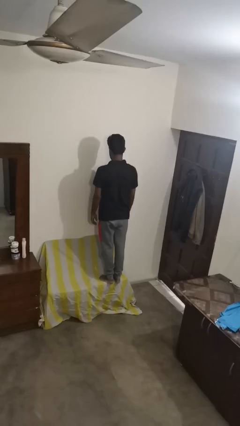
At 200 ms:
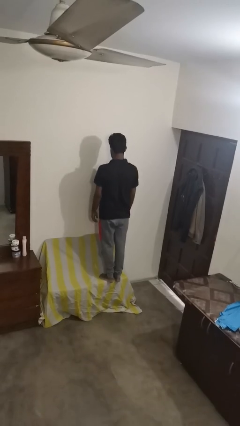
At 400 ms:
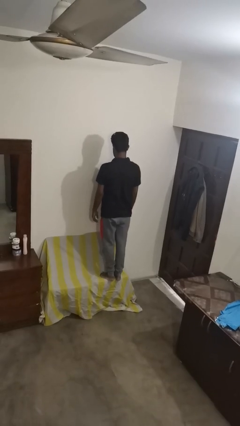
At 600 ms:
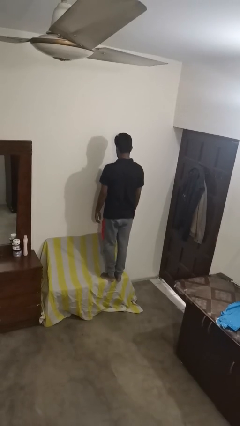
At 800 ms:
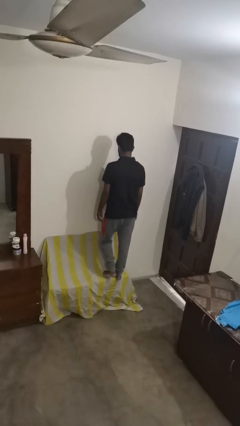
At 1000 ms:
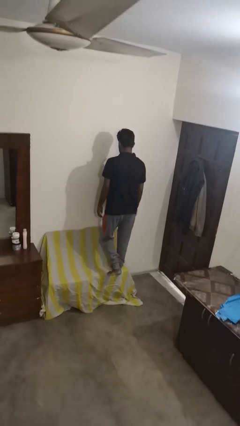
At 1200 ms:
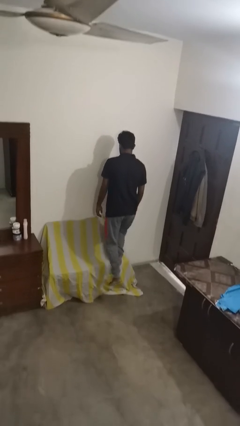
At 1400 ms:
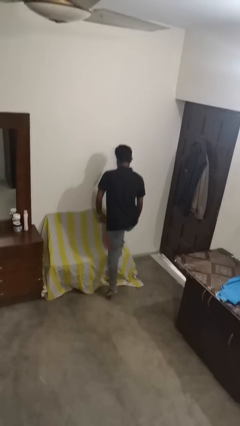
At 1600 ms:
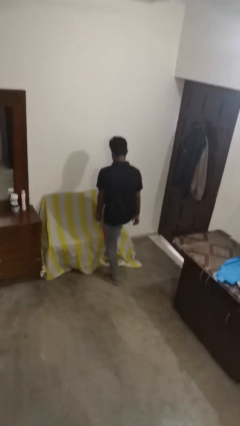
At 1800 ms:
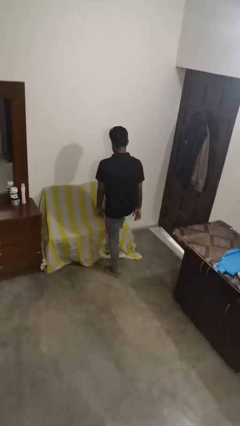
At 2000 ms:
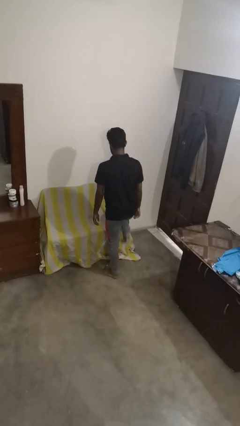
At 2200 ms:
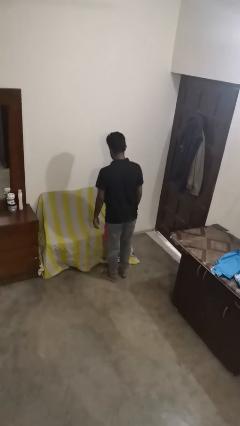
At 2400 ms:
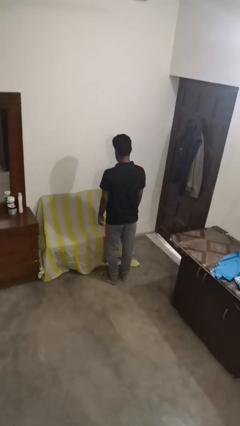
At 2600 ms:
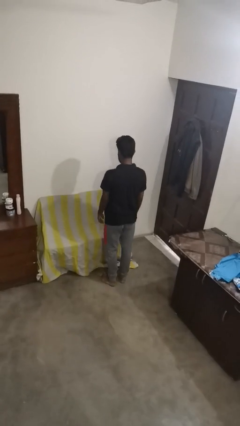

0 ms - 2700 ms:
person climbs off couch

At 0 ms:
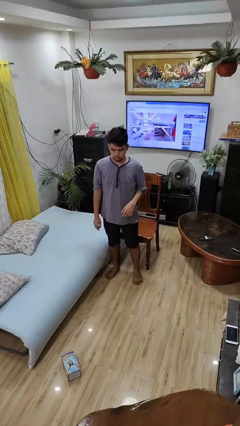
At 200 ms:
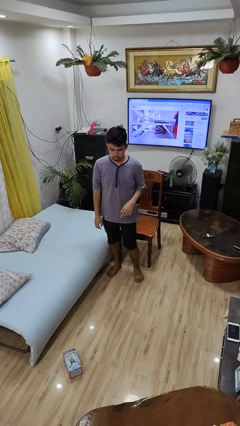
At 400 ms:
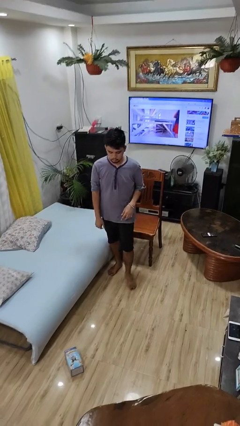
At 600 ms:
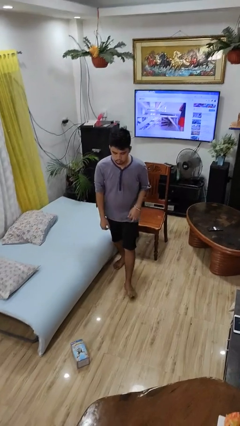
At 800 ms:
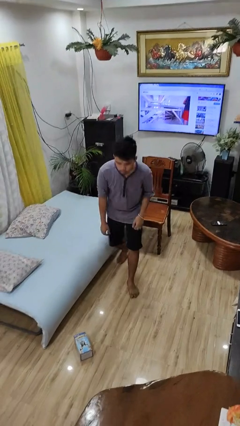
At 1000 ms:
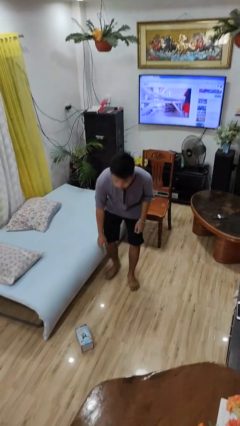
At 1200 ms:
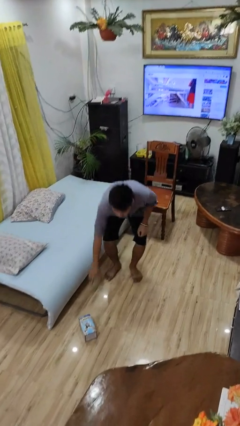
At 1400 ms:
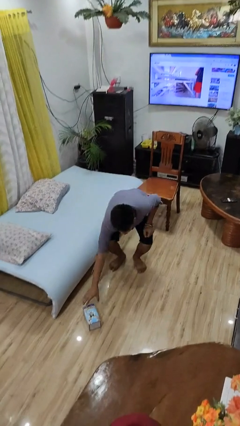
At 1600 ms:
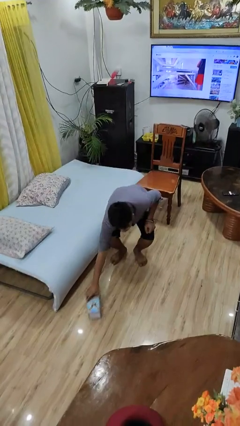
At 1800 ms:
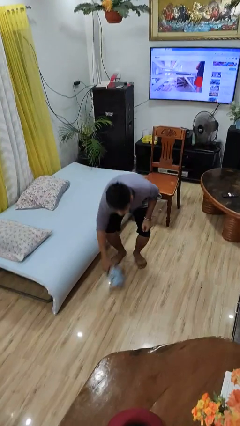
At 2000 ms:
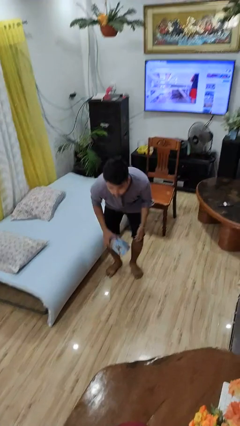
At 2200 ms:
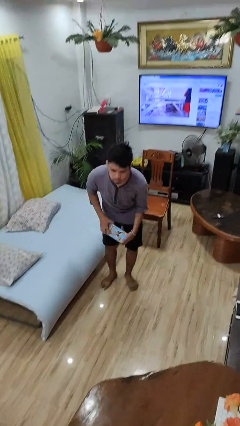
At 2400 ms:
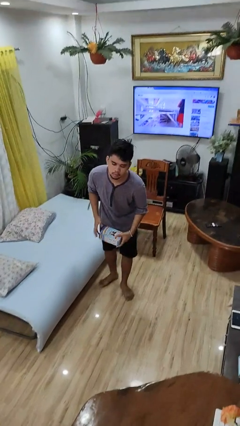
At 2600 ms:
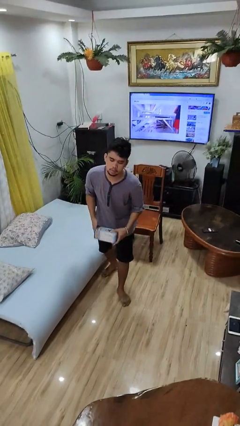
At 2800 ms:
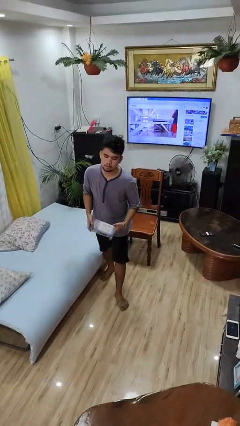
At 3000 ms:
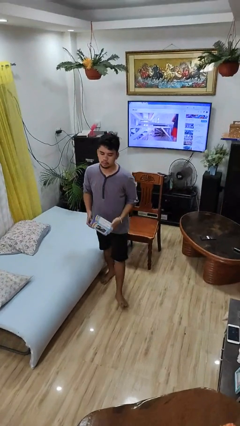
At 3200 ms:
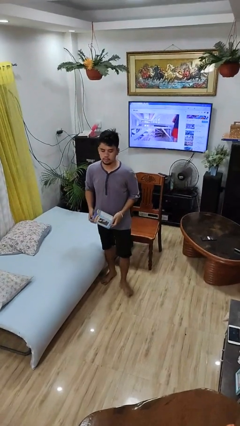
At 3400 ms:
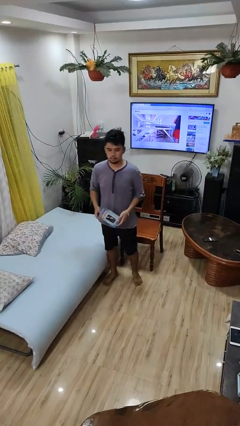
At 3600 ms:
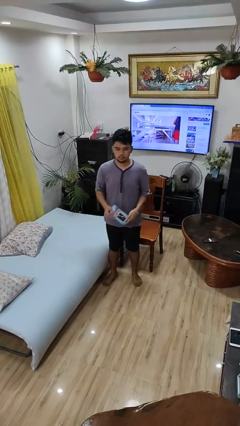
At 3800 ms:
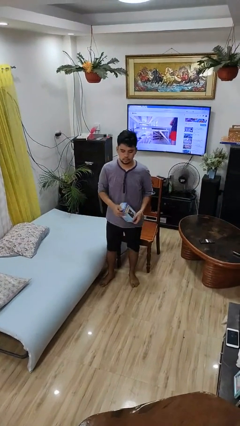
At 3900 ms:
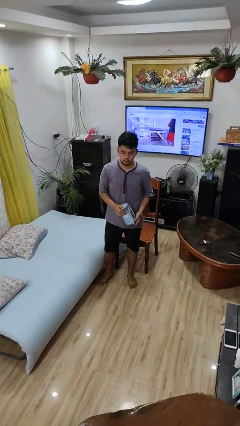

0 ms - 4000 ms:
person picks up object from floor

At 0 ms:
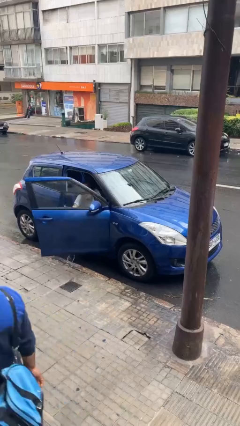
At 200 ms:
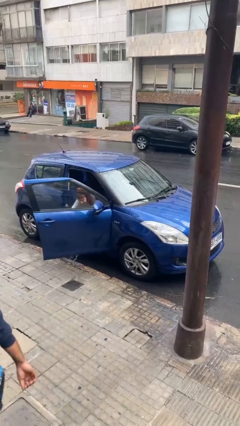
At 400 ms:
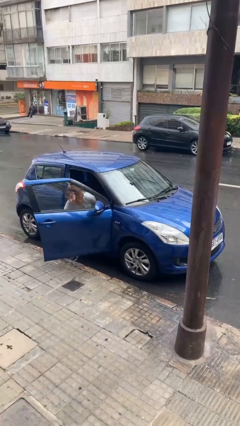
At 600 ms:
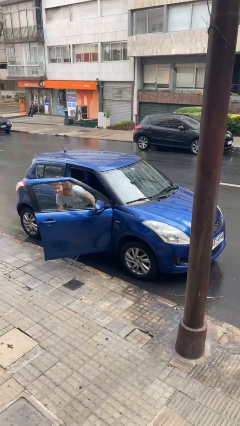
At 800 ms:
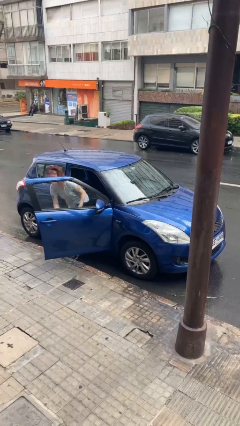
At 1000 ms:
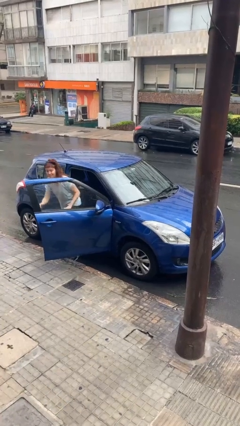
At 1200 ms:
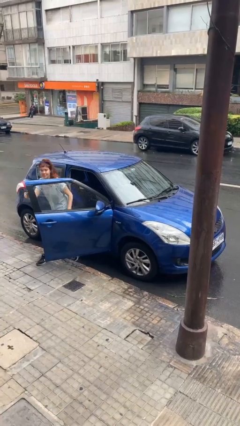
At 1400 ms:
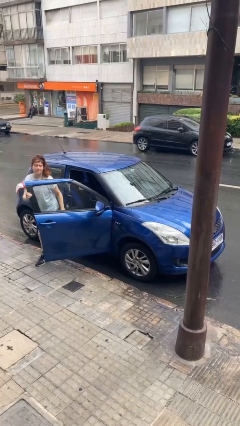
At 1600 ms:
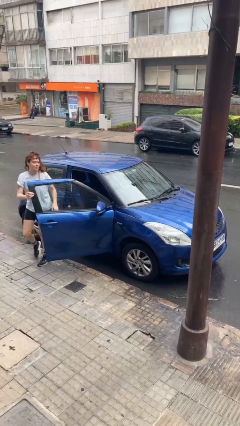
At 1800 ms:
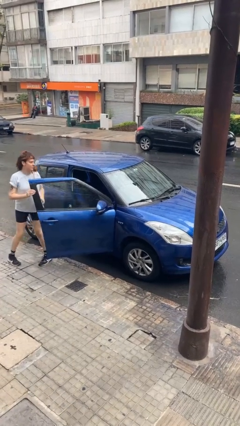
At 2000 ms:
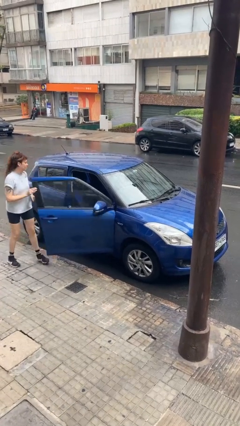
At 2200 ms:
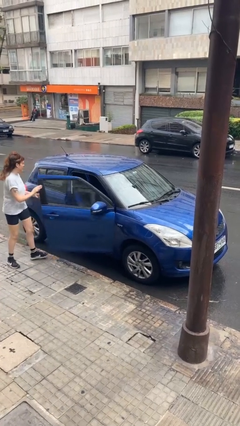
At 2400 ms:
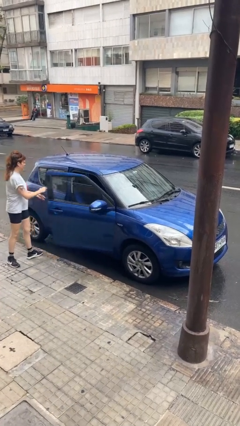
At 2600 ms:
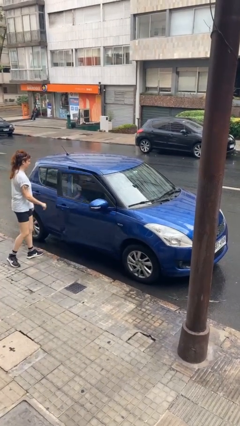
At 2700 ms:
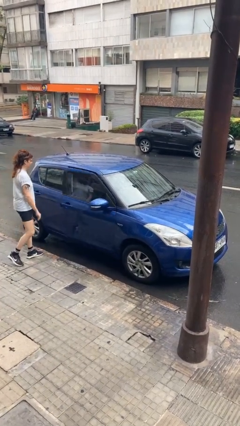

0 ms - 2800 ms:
car drops off person

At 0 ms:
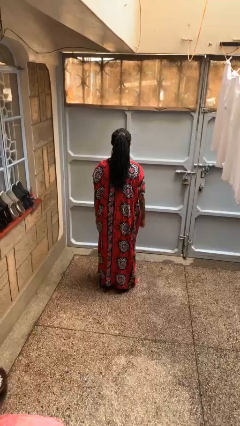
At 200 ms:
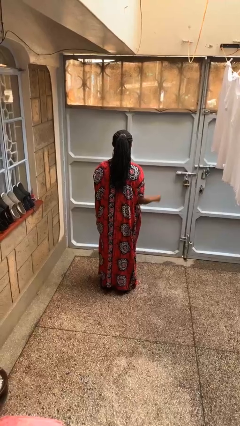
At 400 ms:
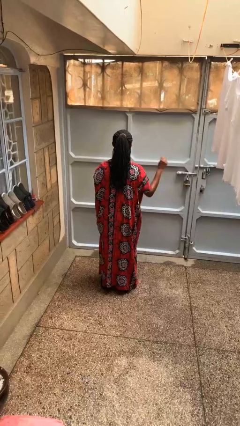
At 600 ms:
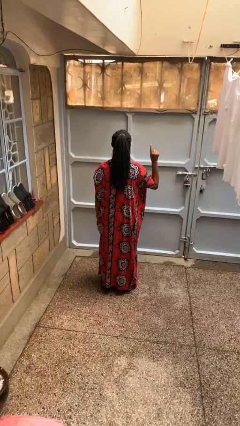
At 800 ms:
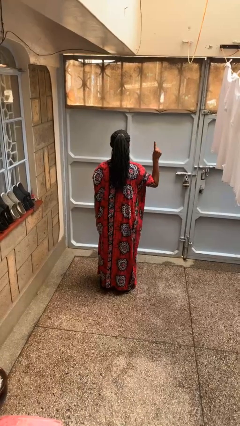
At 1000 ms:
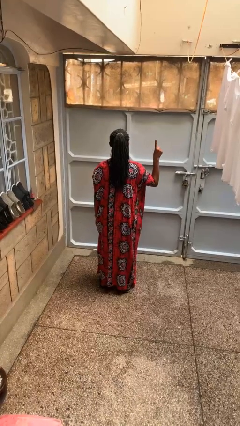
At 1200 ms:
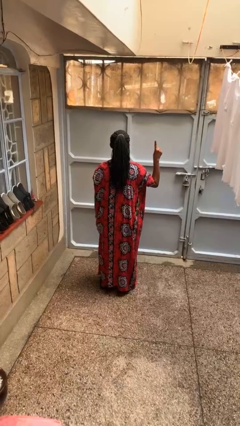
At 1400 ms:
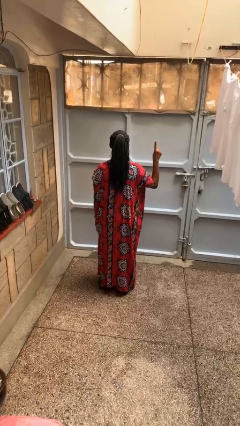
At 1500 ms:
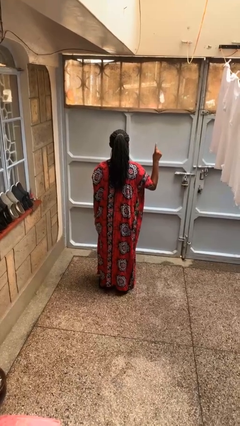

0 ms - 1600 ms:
person gestures number one

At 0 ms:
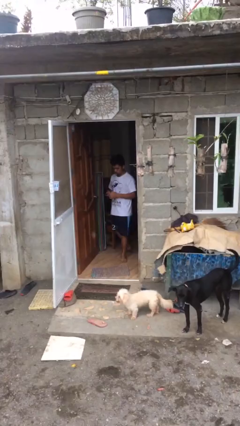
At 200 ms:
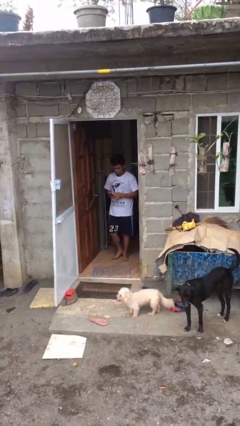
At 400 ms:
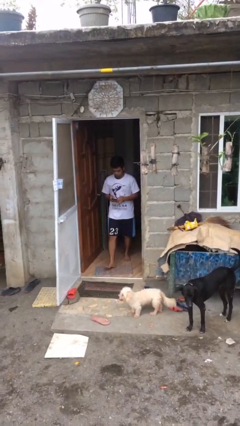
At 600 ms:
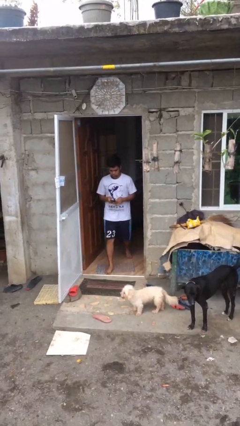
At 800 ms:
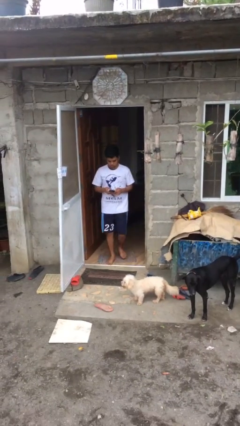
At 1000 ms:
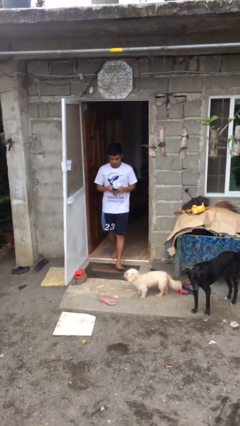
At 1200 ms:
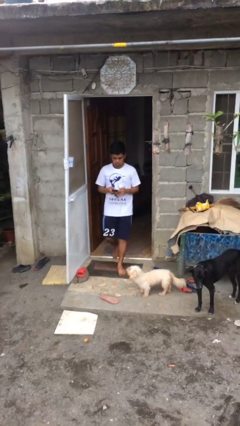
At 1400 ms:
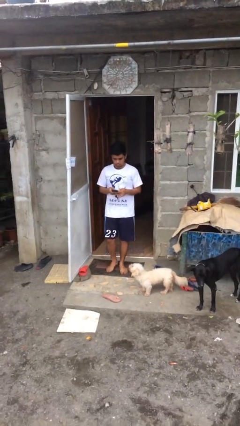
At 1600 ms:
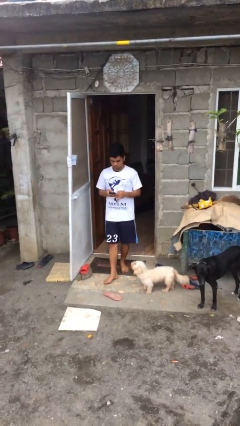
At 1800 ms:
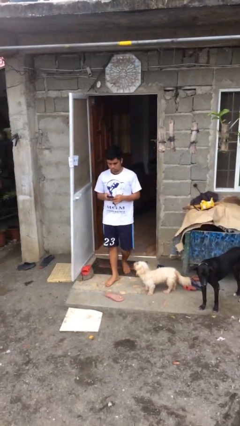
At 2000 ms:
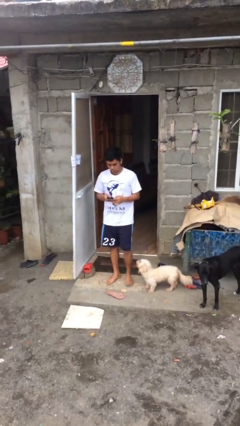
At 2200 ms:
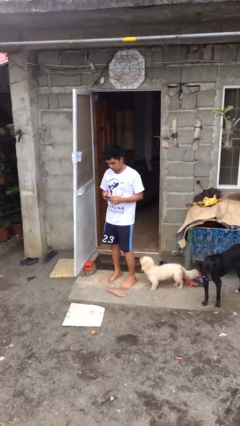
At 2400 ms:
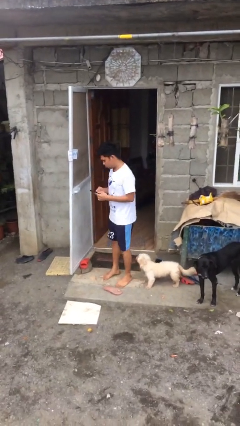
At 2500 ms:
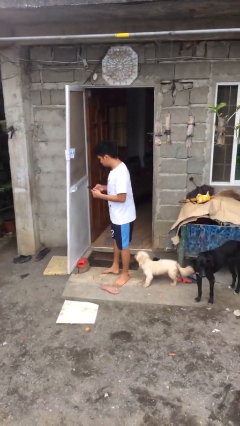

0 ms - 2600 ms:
person enters scene through structure

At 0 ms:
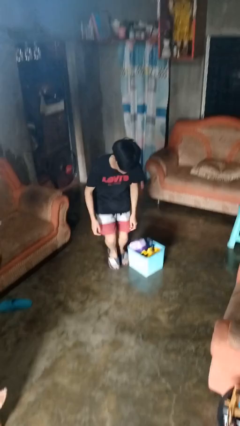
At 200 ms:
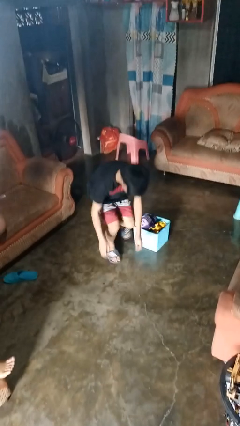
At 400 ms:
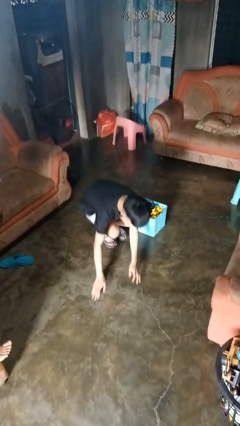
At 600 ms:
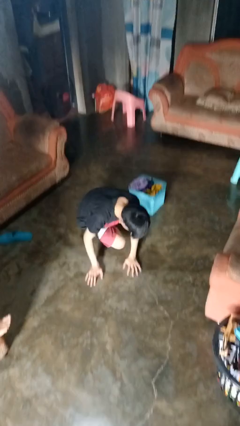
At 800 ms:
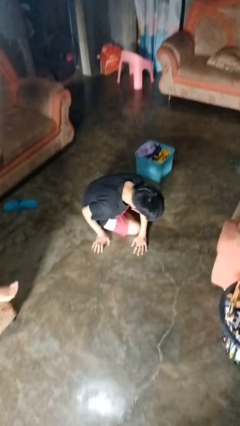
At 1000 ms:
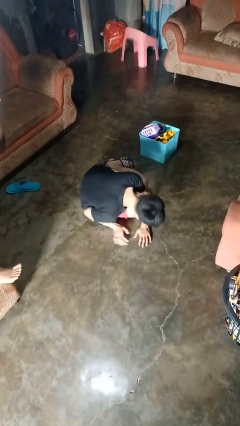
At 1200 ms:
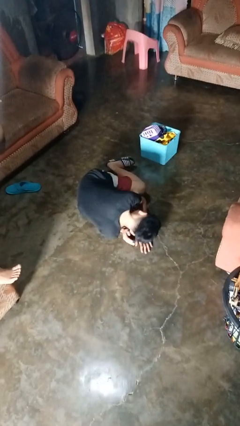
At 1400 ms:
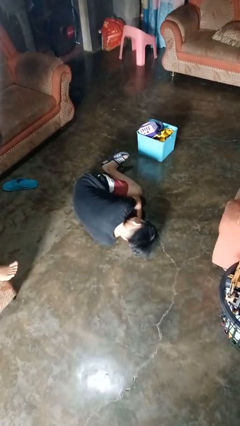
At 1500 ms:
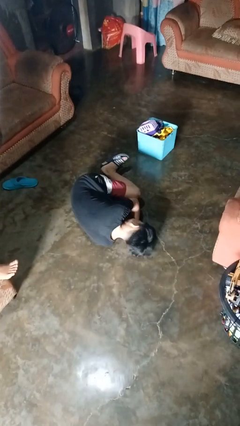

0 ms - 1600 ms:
person lies down on floor

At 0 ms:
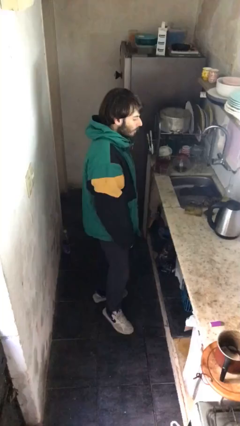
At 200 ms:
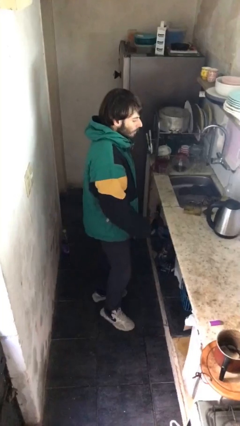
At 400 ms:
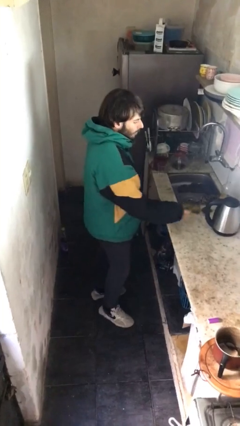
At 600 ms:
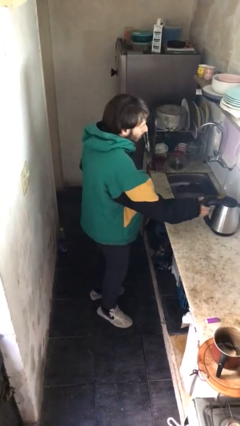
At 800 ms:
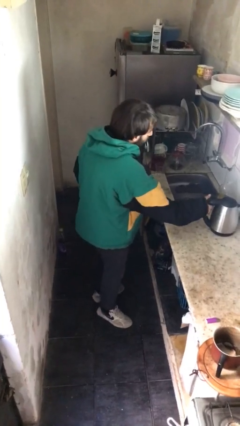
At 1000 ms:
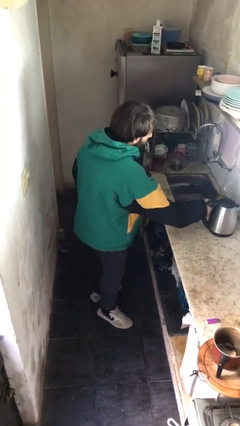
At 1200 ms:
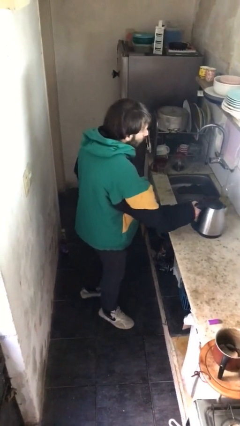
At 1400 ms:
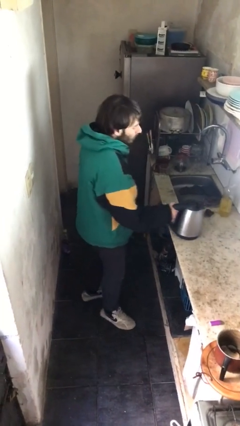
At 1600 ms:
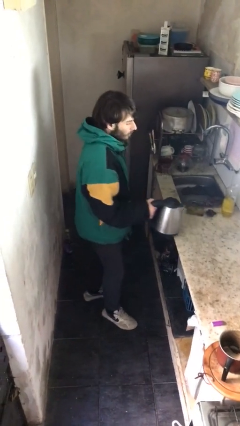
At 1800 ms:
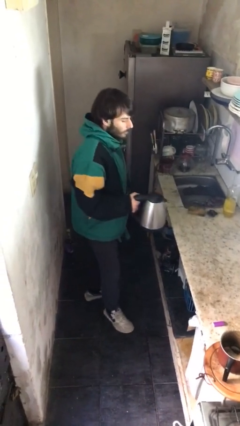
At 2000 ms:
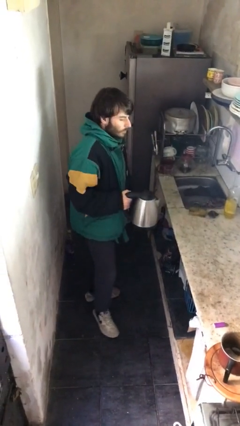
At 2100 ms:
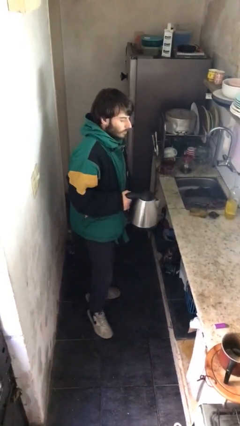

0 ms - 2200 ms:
person picks up object from countertop
